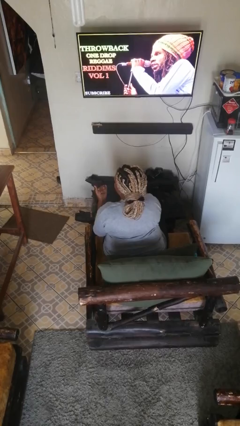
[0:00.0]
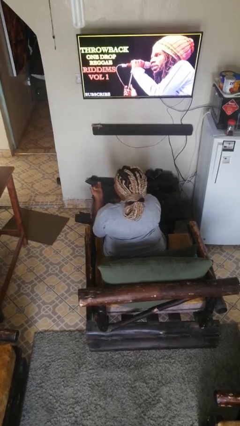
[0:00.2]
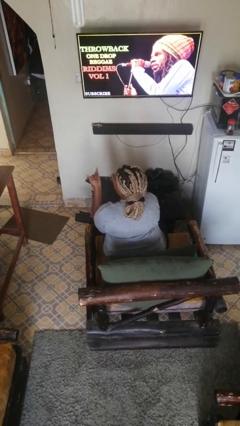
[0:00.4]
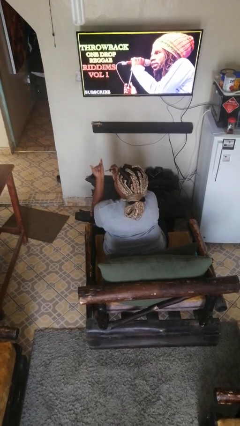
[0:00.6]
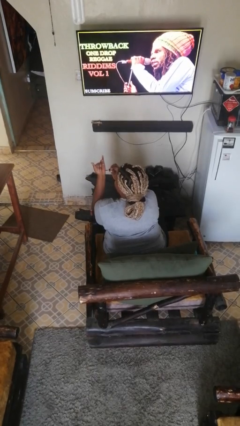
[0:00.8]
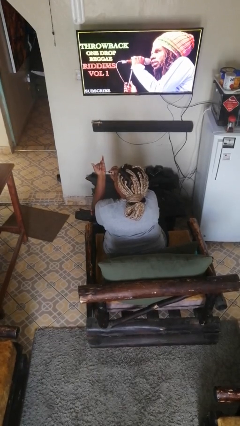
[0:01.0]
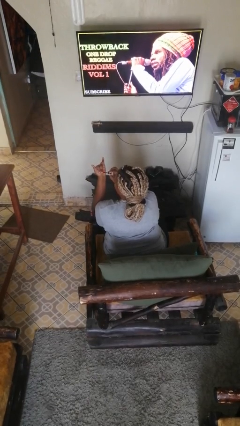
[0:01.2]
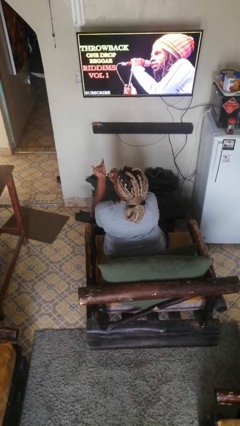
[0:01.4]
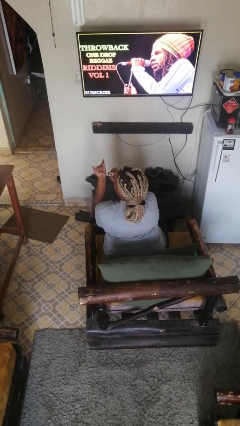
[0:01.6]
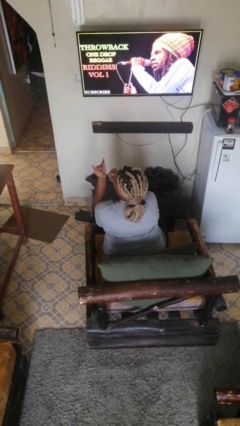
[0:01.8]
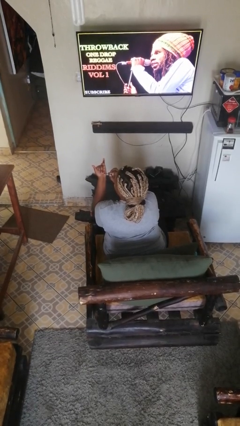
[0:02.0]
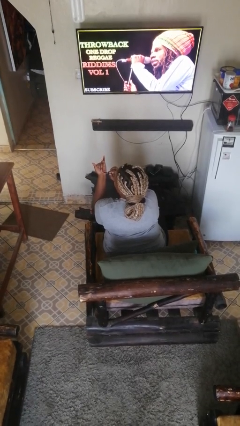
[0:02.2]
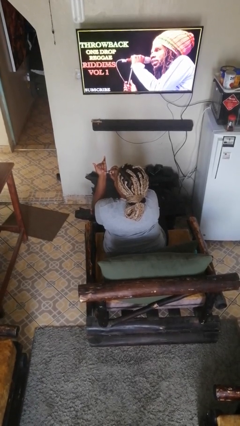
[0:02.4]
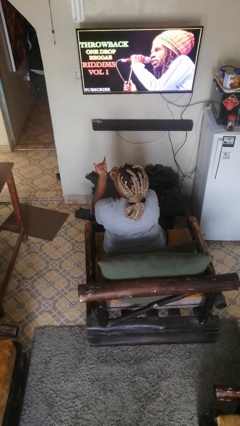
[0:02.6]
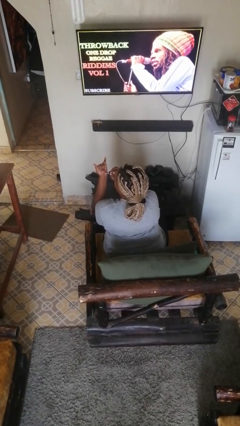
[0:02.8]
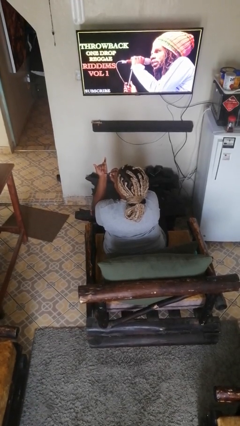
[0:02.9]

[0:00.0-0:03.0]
person paints fingernails

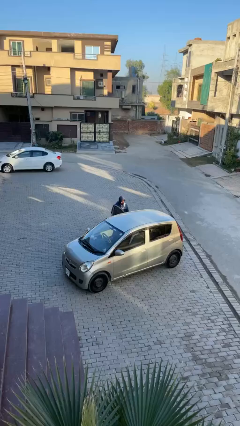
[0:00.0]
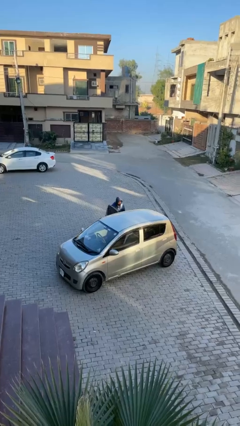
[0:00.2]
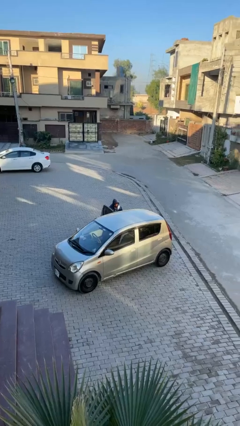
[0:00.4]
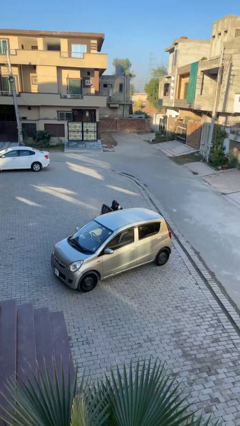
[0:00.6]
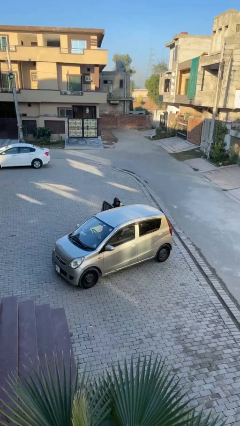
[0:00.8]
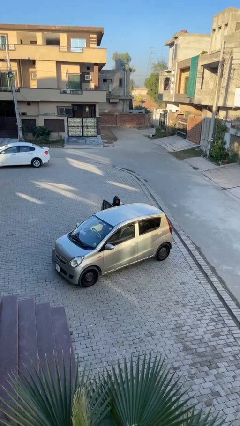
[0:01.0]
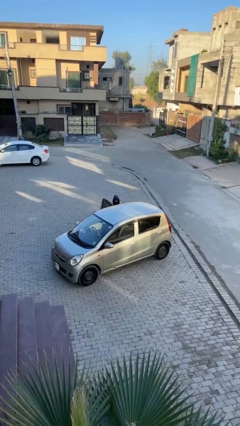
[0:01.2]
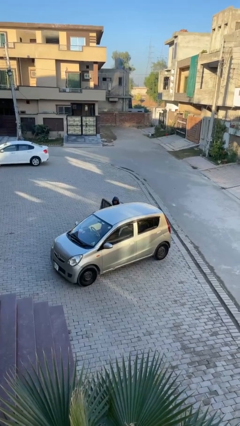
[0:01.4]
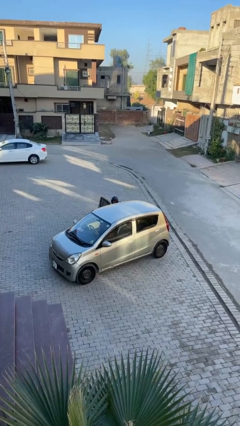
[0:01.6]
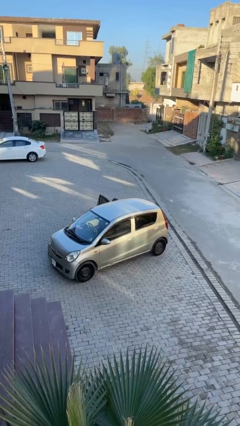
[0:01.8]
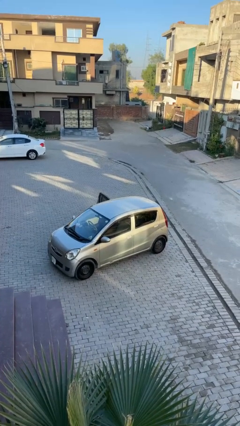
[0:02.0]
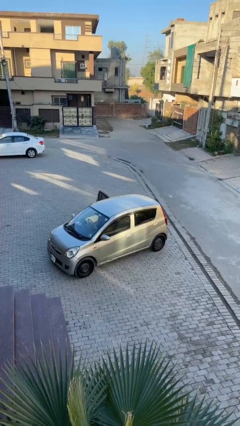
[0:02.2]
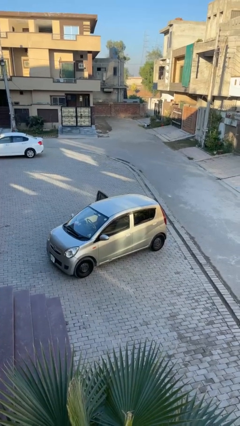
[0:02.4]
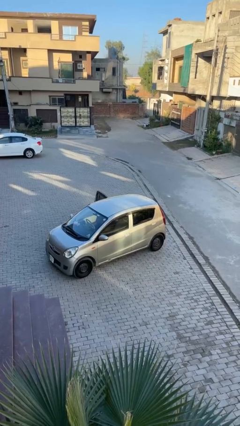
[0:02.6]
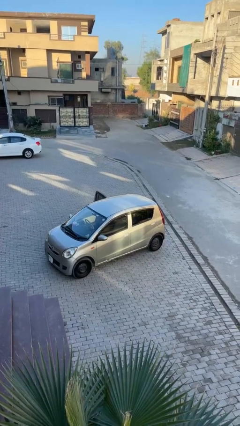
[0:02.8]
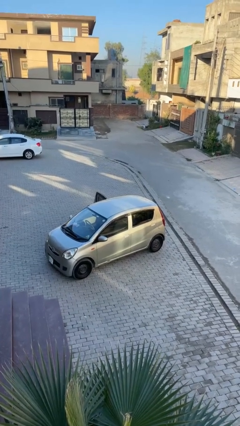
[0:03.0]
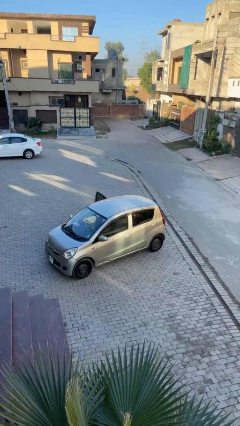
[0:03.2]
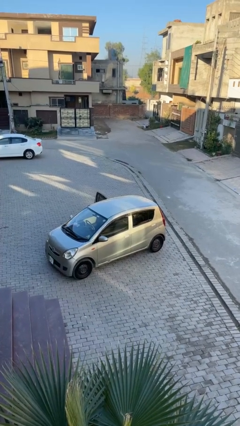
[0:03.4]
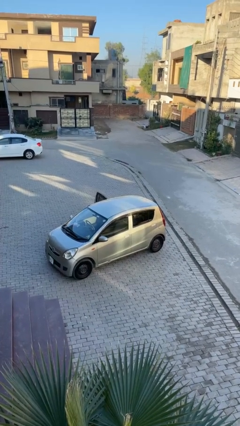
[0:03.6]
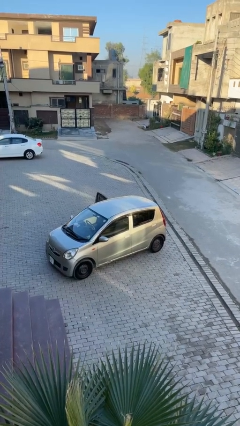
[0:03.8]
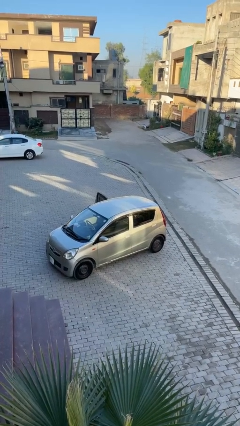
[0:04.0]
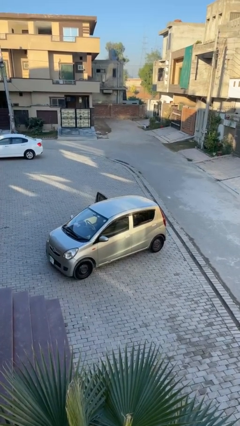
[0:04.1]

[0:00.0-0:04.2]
person enters car

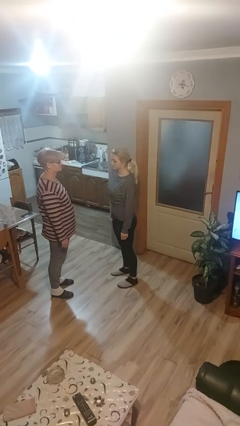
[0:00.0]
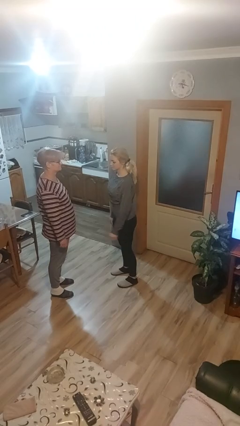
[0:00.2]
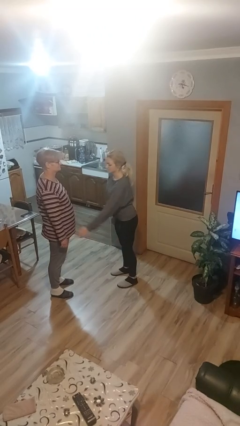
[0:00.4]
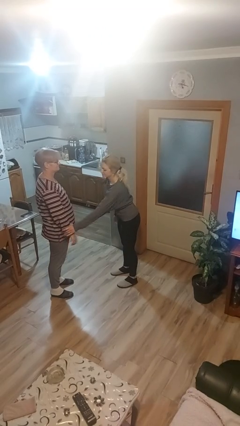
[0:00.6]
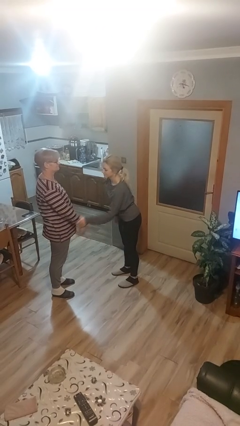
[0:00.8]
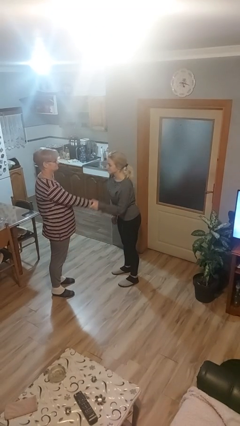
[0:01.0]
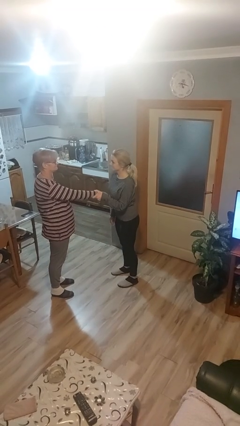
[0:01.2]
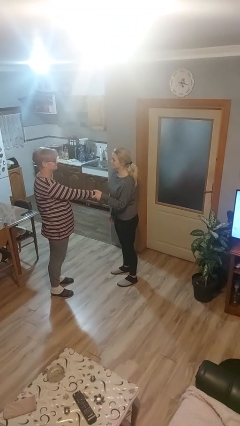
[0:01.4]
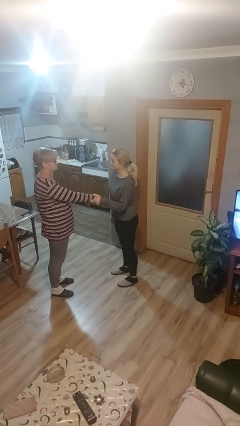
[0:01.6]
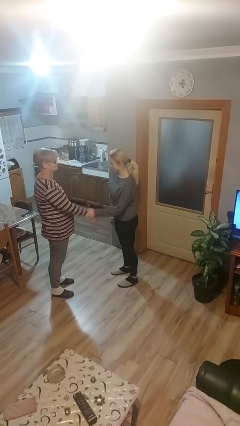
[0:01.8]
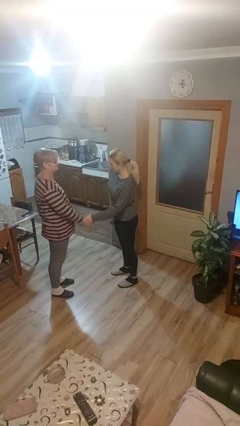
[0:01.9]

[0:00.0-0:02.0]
person grabs person by forearm

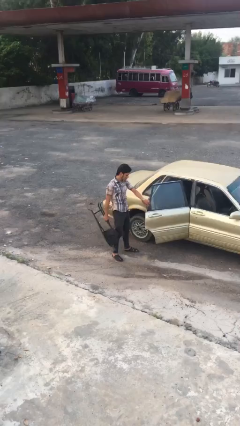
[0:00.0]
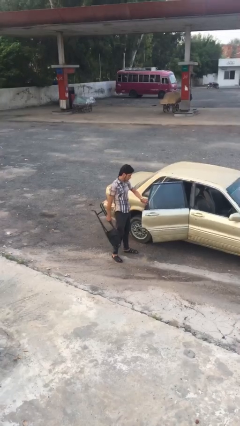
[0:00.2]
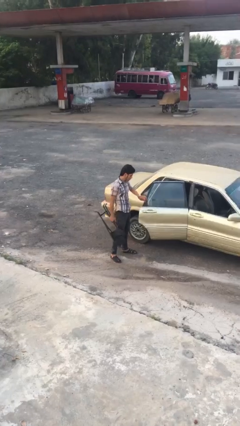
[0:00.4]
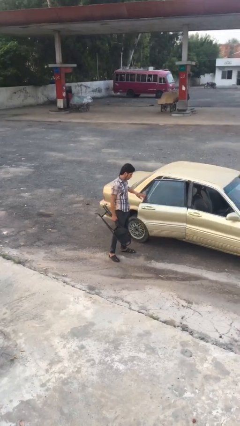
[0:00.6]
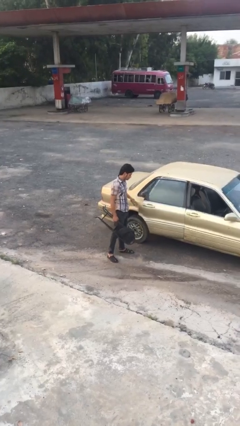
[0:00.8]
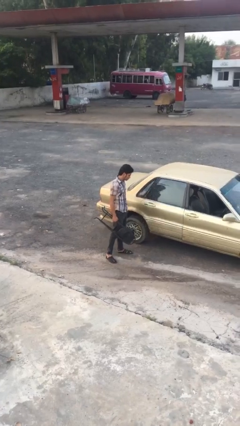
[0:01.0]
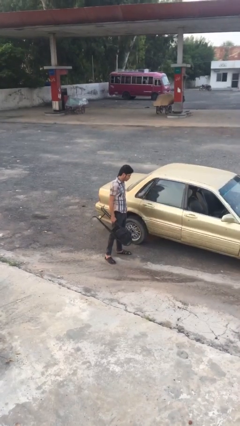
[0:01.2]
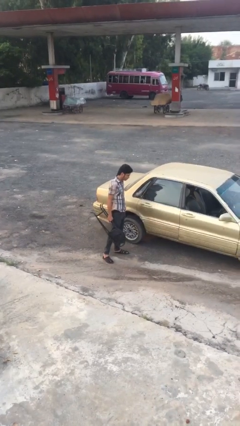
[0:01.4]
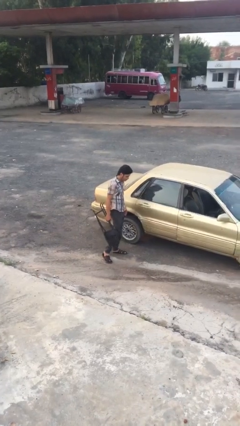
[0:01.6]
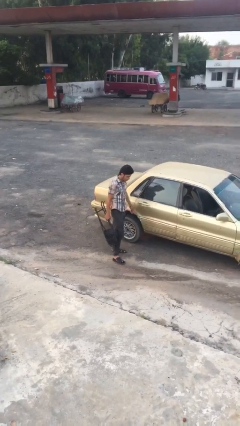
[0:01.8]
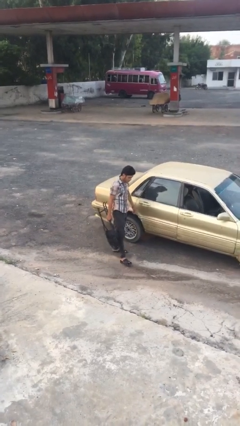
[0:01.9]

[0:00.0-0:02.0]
person closes car door

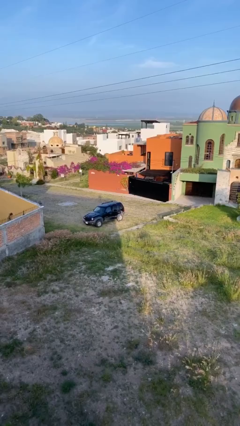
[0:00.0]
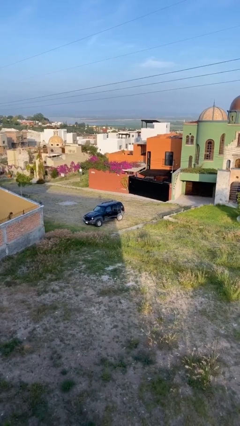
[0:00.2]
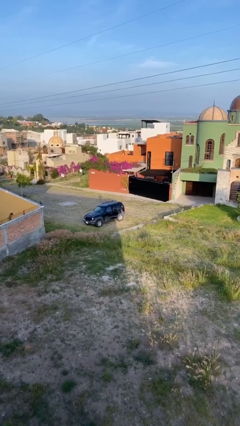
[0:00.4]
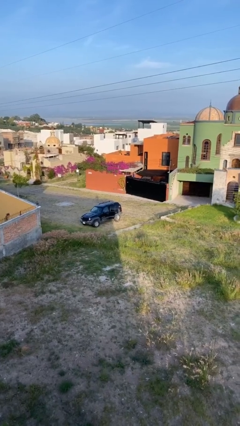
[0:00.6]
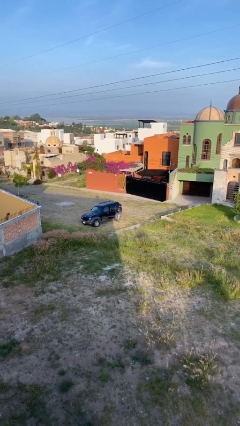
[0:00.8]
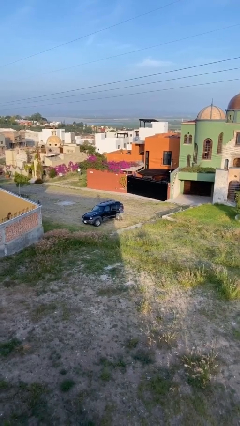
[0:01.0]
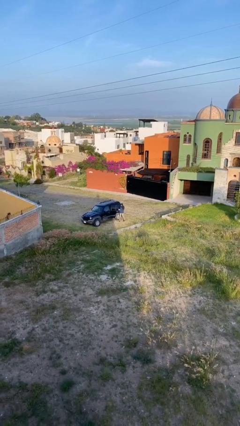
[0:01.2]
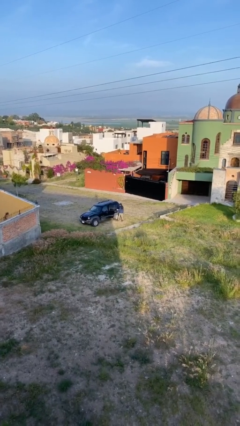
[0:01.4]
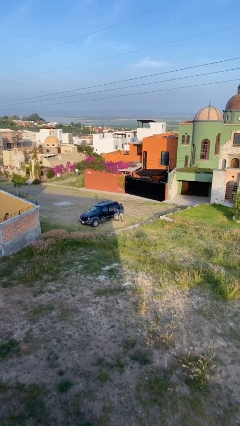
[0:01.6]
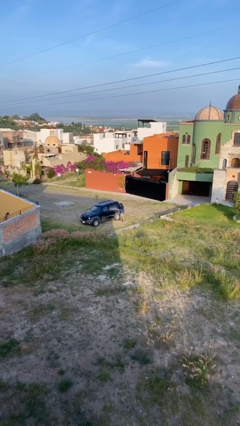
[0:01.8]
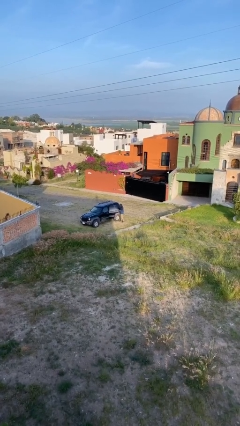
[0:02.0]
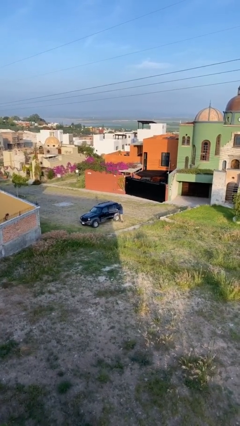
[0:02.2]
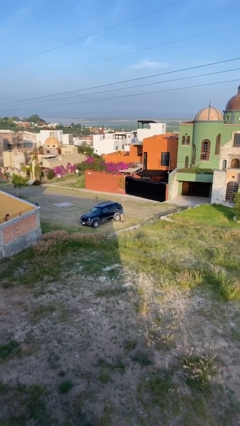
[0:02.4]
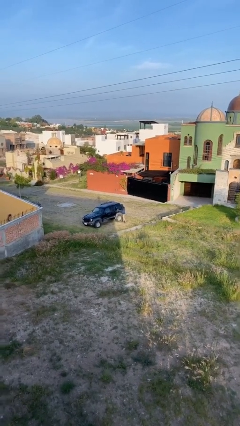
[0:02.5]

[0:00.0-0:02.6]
person exits car

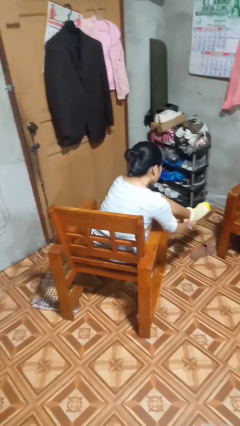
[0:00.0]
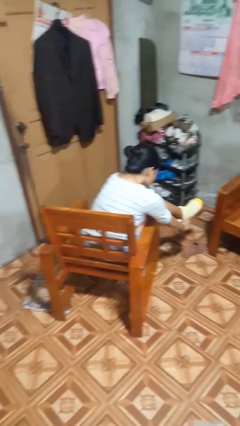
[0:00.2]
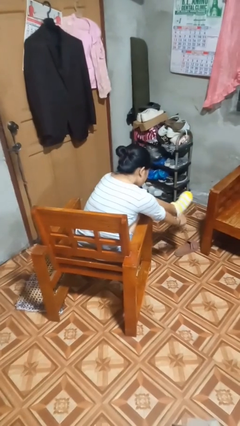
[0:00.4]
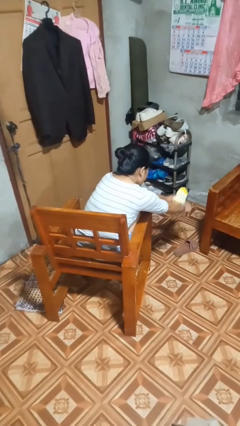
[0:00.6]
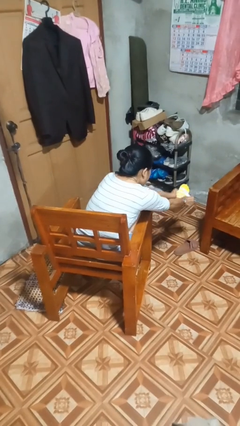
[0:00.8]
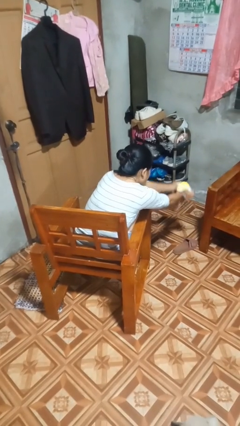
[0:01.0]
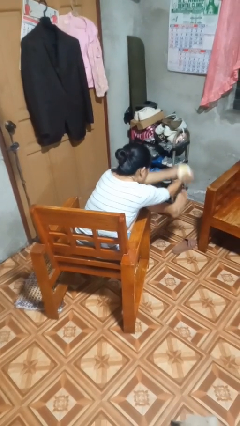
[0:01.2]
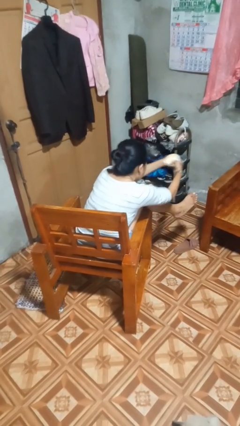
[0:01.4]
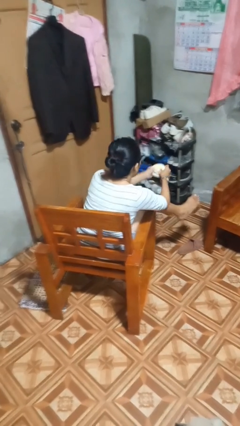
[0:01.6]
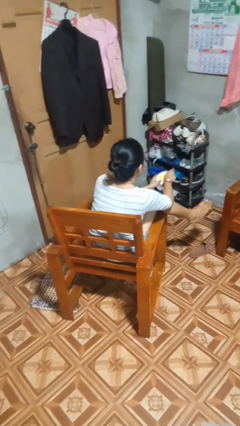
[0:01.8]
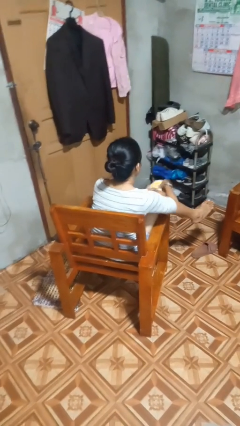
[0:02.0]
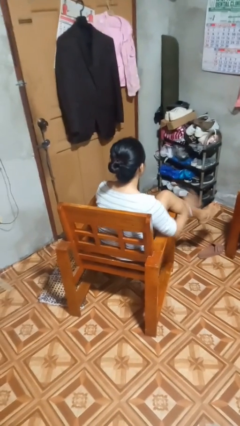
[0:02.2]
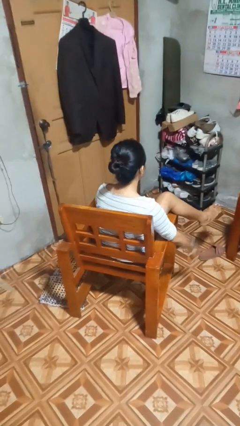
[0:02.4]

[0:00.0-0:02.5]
person takes off socks

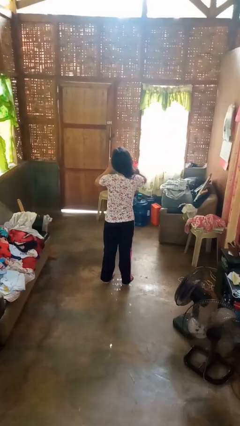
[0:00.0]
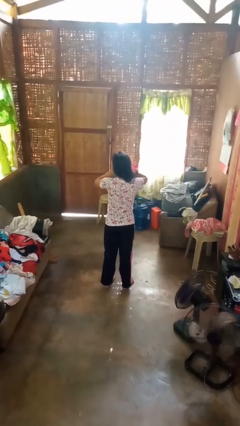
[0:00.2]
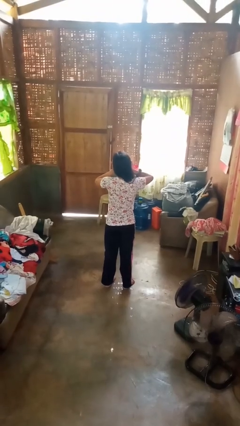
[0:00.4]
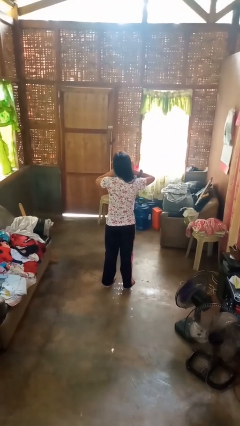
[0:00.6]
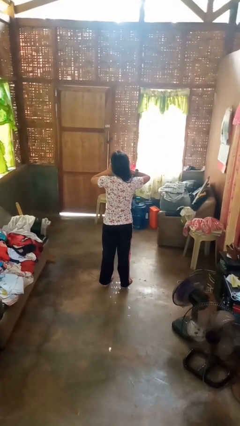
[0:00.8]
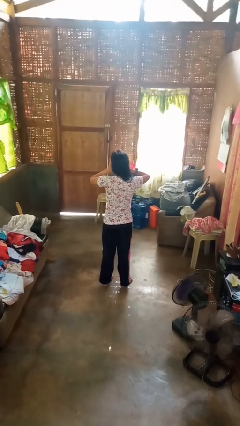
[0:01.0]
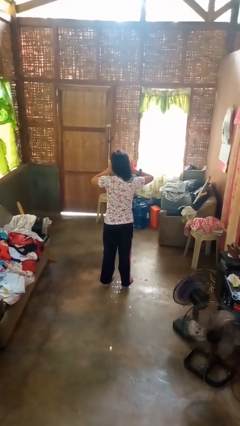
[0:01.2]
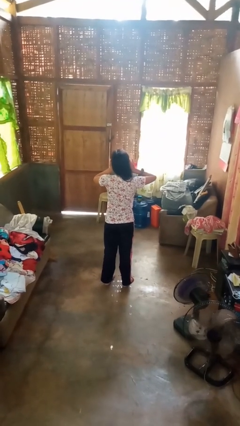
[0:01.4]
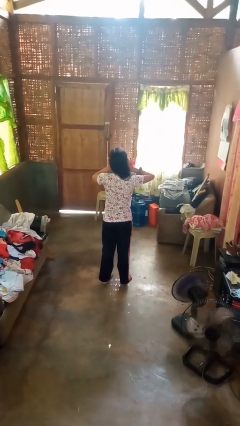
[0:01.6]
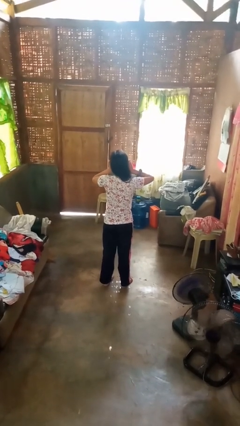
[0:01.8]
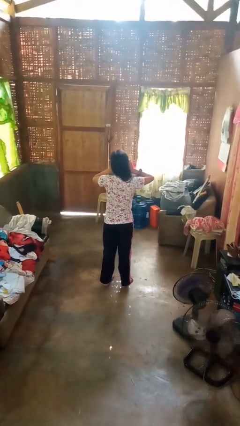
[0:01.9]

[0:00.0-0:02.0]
person puts fingers in ear
